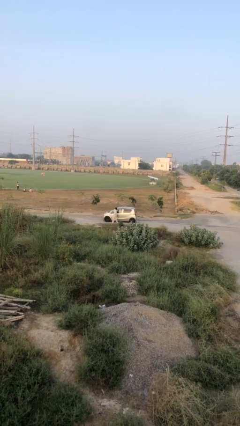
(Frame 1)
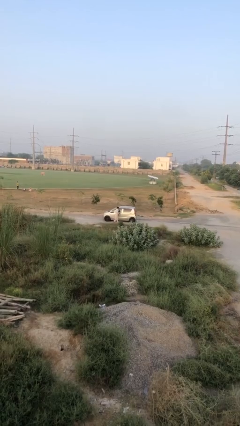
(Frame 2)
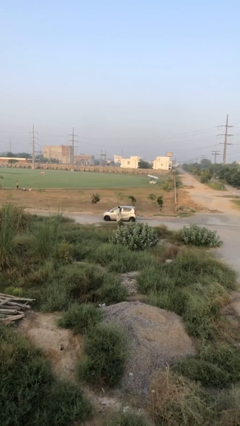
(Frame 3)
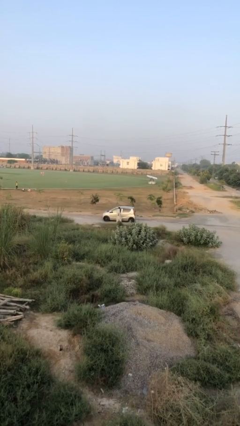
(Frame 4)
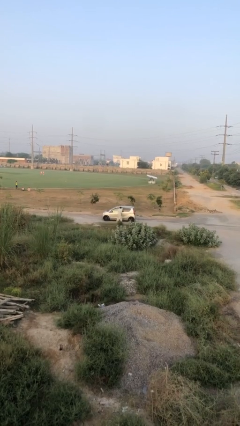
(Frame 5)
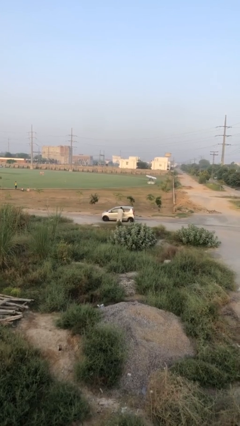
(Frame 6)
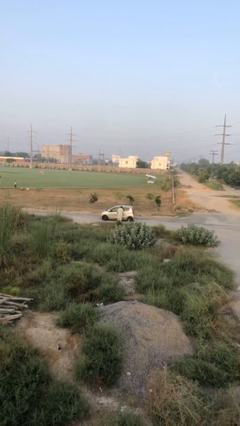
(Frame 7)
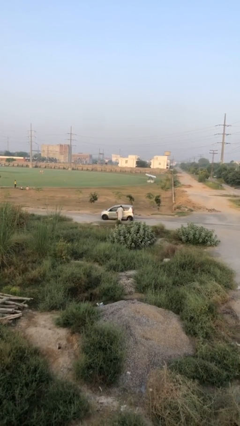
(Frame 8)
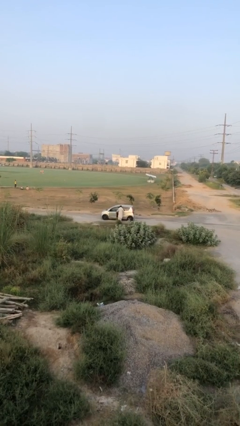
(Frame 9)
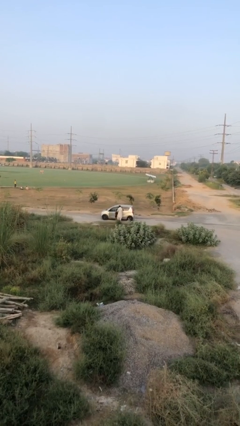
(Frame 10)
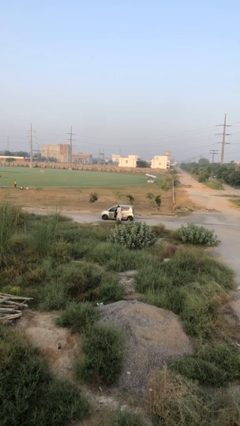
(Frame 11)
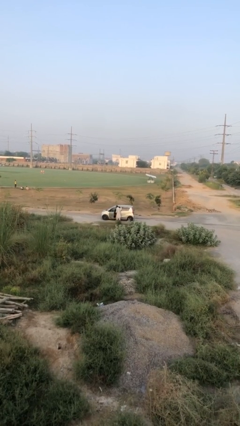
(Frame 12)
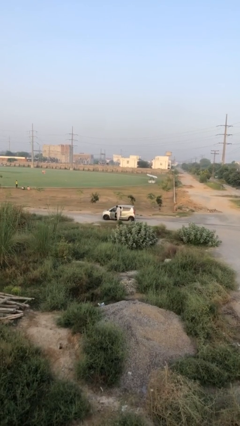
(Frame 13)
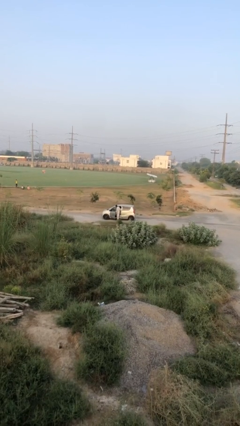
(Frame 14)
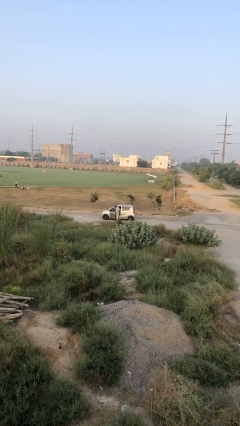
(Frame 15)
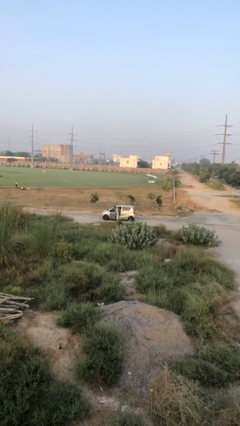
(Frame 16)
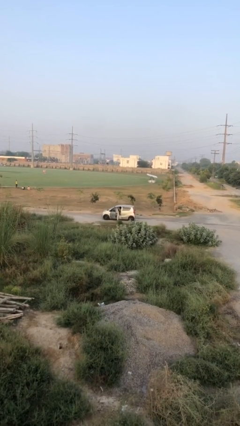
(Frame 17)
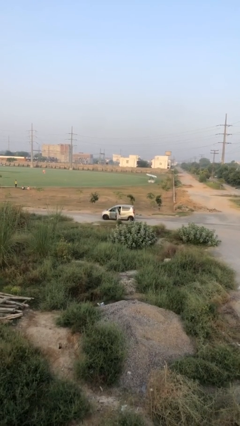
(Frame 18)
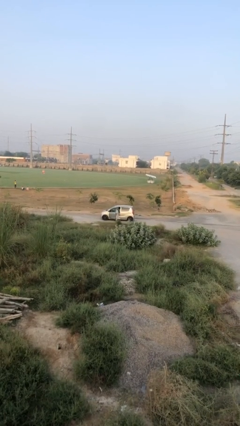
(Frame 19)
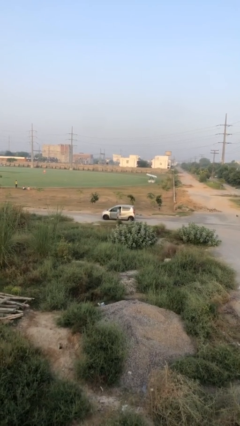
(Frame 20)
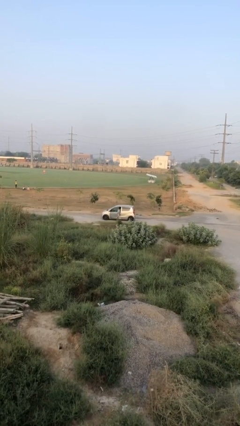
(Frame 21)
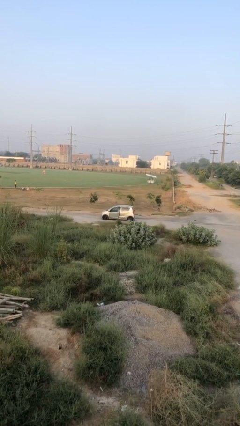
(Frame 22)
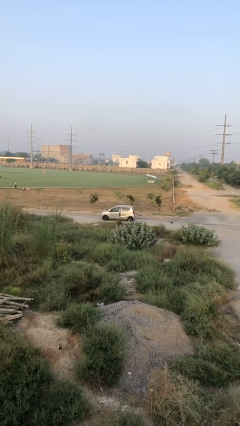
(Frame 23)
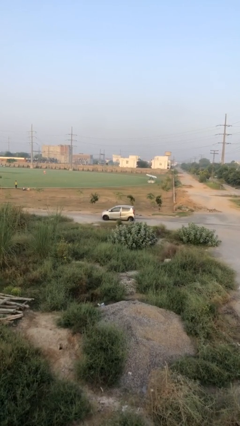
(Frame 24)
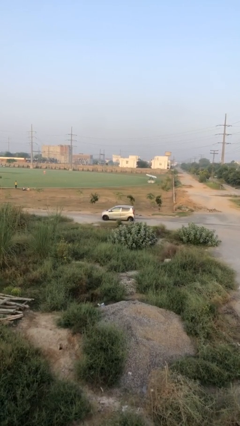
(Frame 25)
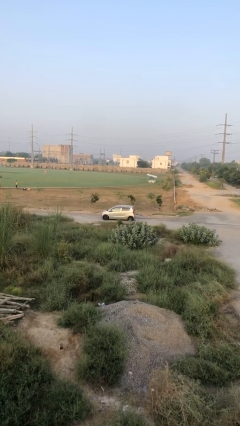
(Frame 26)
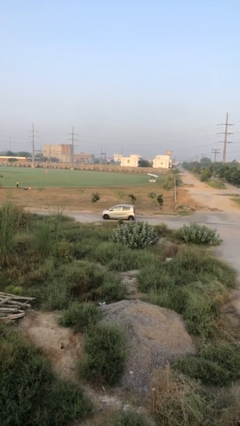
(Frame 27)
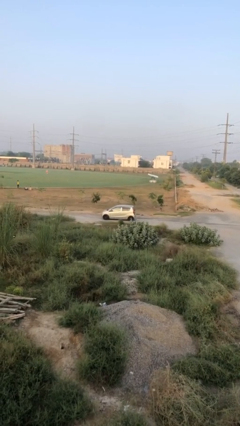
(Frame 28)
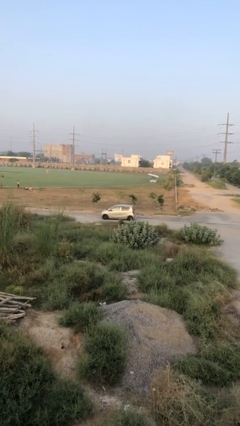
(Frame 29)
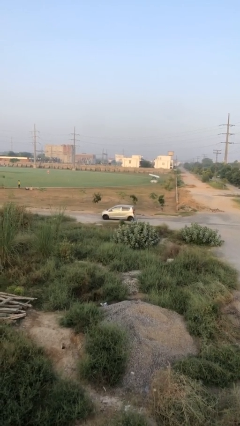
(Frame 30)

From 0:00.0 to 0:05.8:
car picks up person

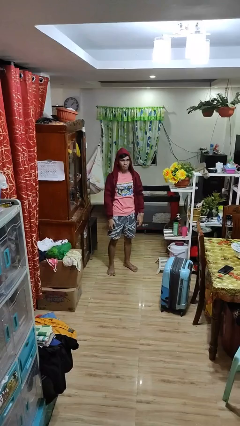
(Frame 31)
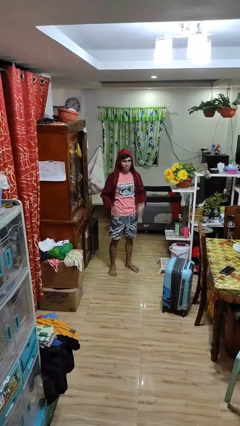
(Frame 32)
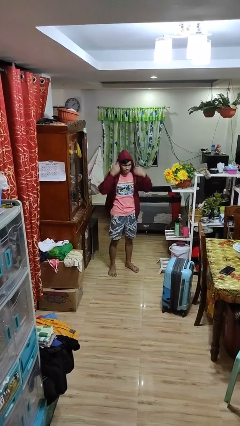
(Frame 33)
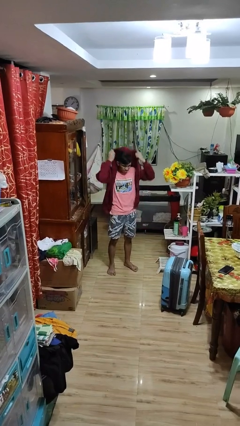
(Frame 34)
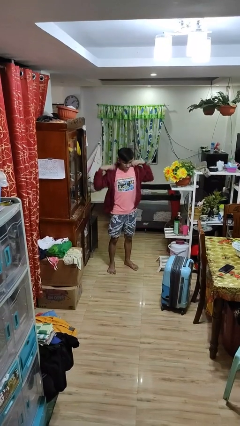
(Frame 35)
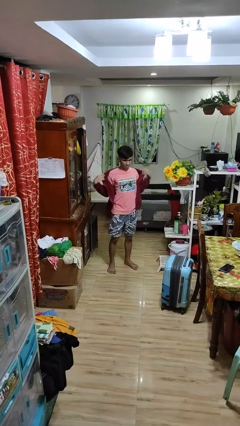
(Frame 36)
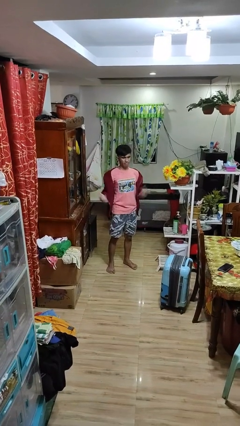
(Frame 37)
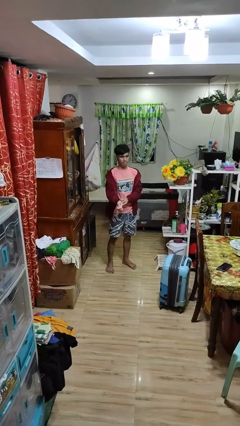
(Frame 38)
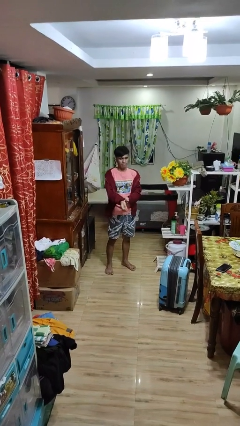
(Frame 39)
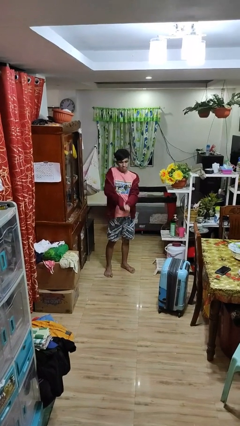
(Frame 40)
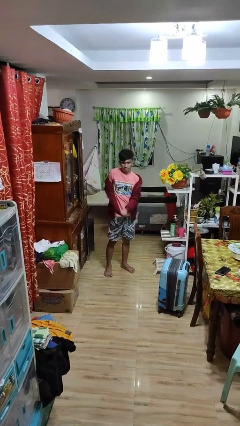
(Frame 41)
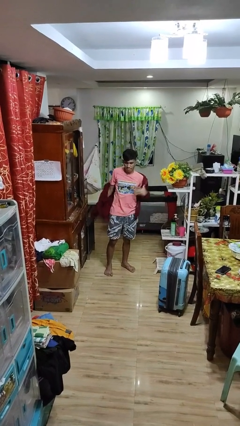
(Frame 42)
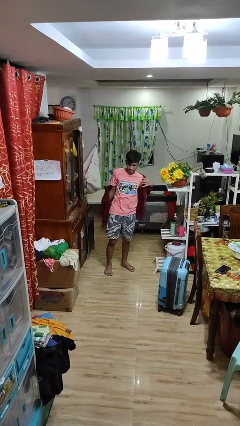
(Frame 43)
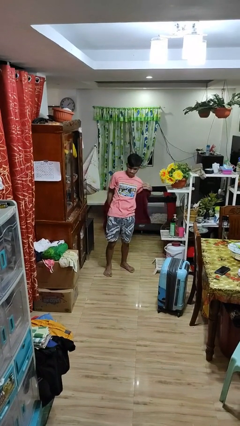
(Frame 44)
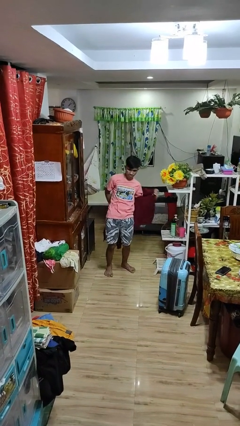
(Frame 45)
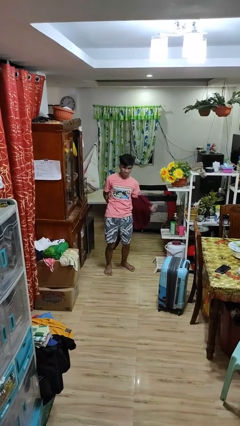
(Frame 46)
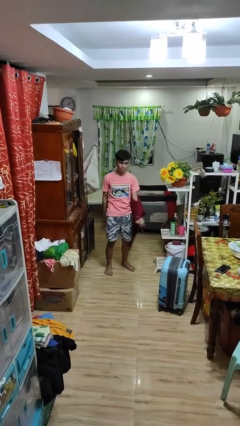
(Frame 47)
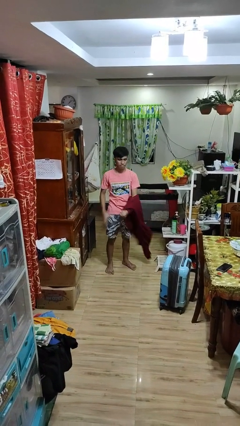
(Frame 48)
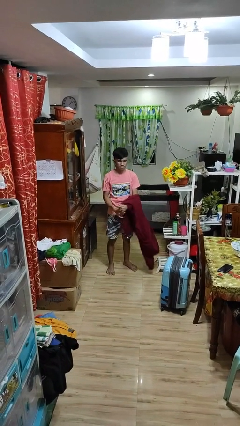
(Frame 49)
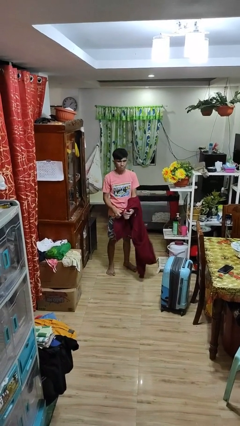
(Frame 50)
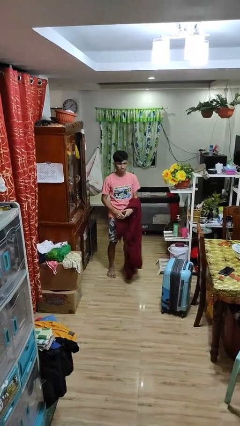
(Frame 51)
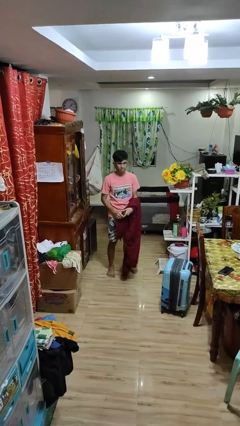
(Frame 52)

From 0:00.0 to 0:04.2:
person takes off hoodie

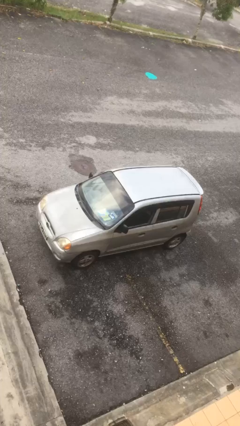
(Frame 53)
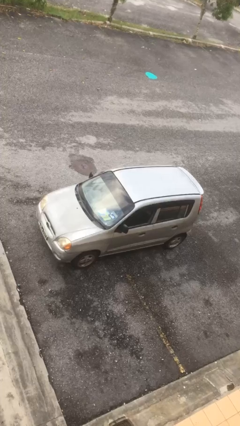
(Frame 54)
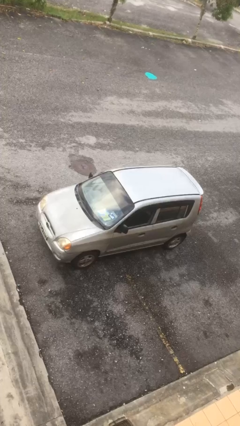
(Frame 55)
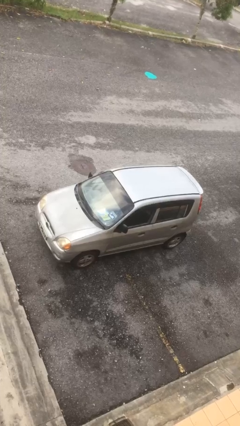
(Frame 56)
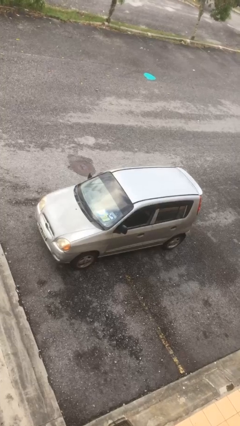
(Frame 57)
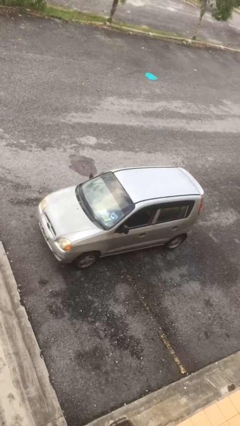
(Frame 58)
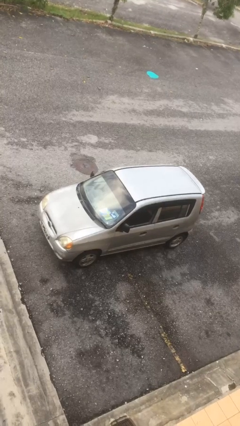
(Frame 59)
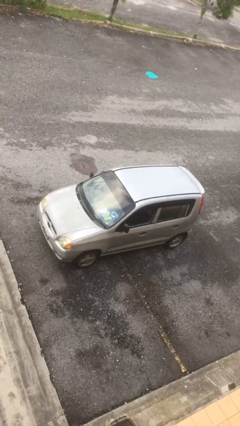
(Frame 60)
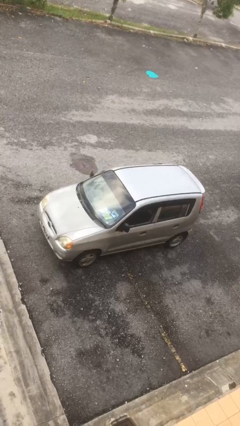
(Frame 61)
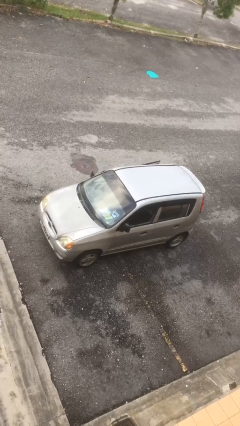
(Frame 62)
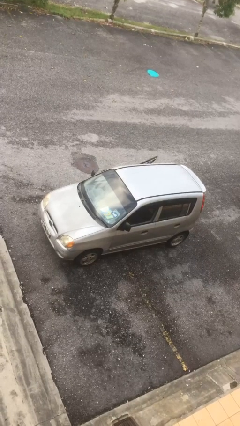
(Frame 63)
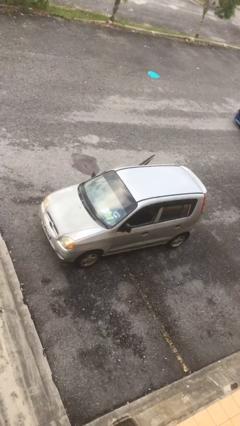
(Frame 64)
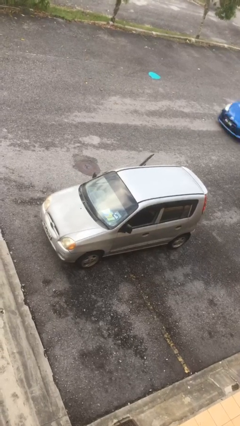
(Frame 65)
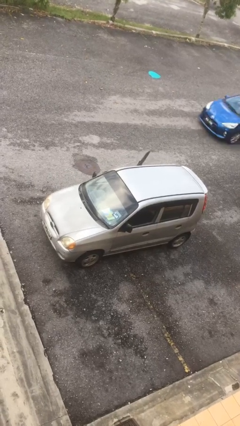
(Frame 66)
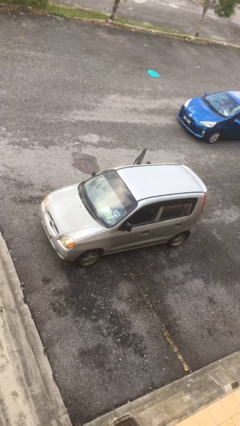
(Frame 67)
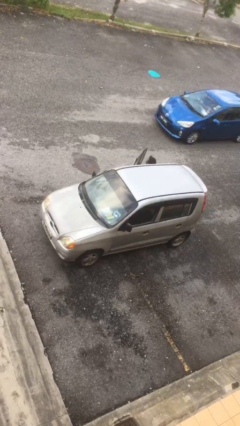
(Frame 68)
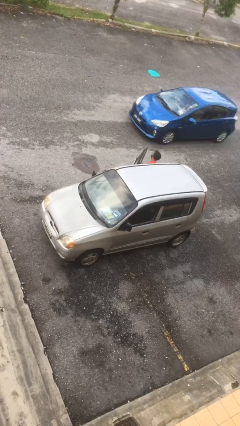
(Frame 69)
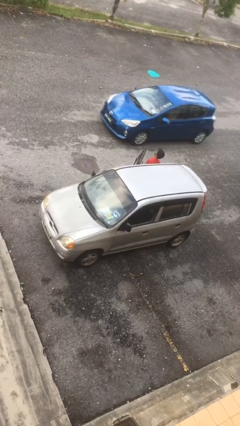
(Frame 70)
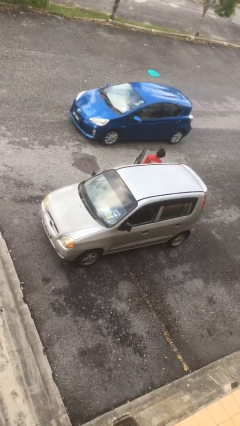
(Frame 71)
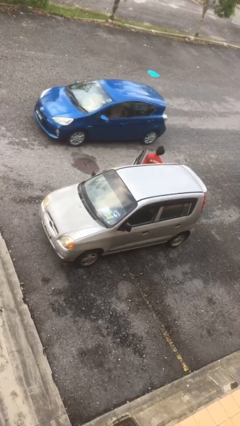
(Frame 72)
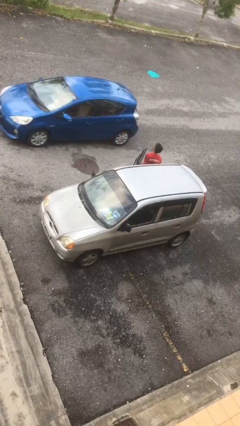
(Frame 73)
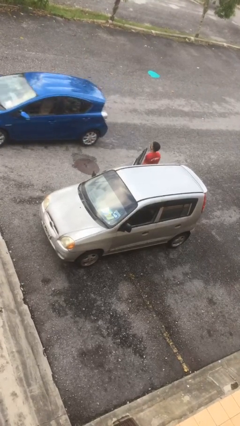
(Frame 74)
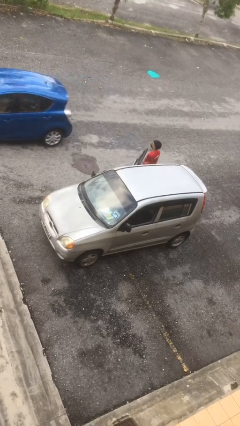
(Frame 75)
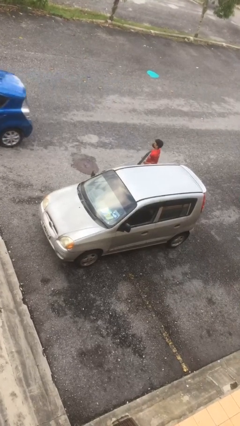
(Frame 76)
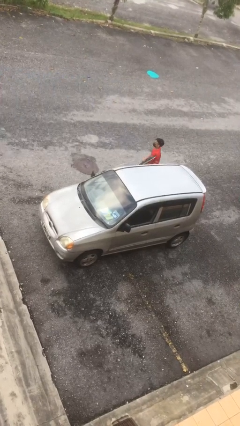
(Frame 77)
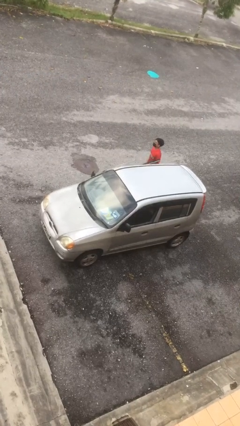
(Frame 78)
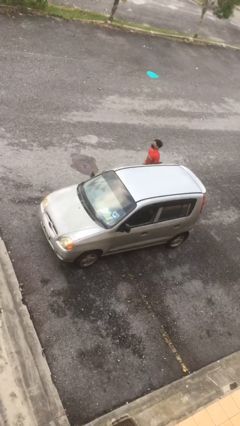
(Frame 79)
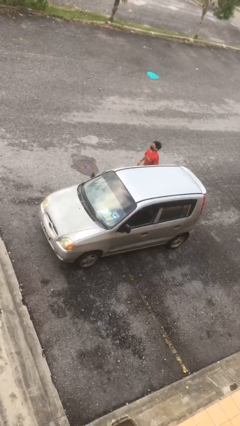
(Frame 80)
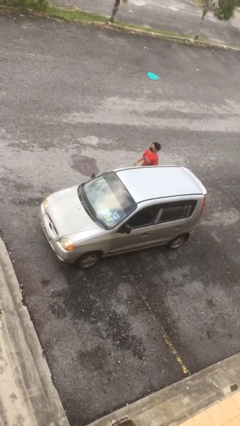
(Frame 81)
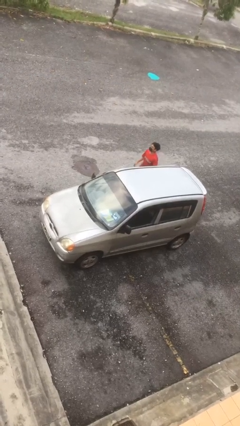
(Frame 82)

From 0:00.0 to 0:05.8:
car drops off person

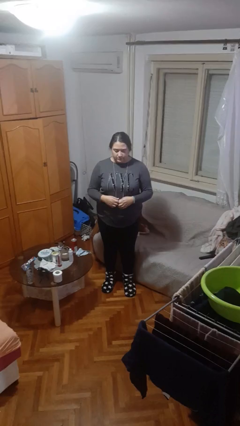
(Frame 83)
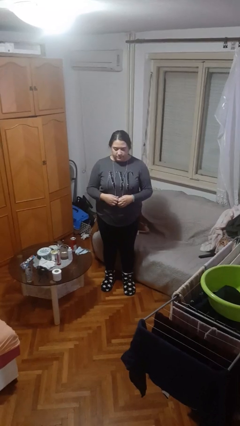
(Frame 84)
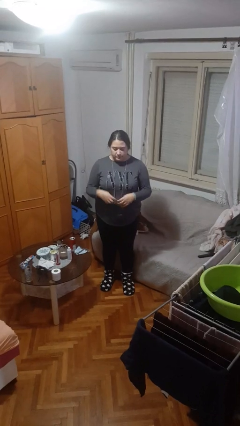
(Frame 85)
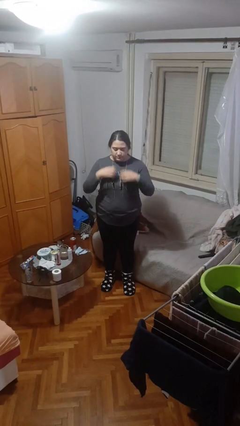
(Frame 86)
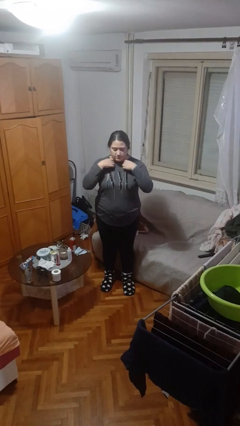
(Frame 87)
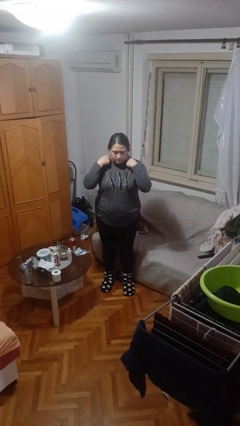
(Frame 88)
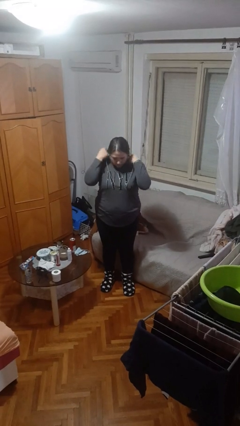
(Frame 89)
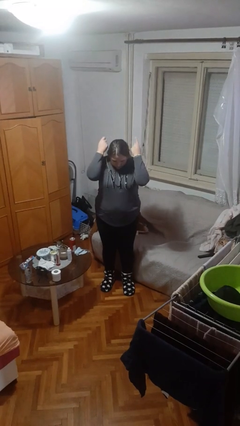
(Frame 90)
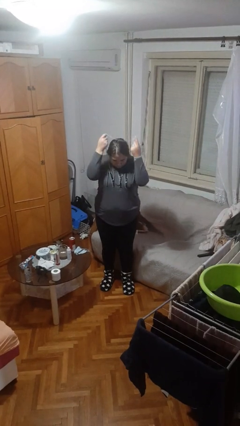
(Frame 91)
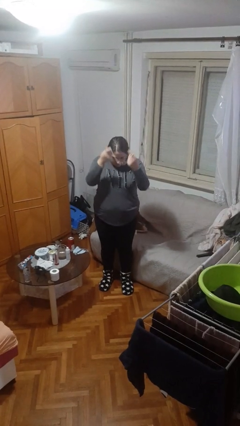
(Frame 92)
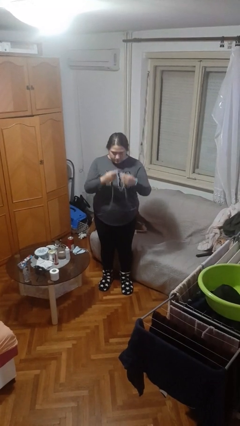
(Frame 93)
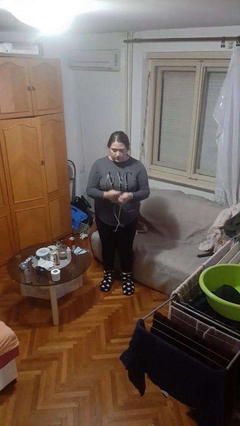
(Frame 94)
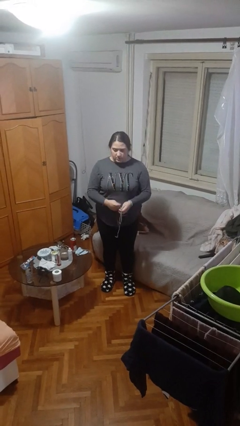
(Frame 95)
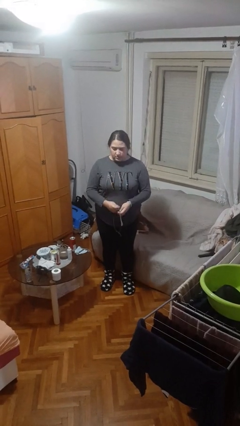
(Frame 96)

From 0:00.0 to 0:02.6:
person takes off necklace
